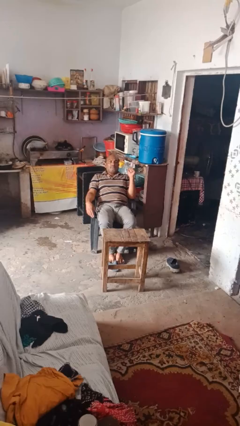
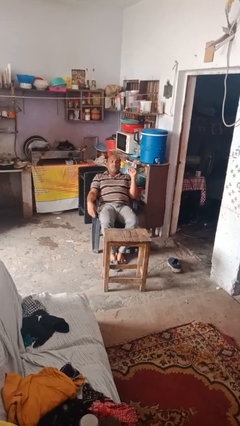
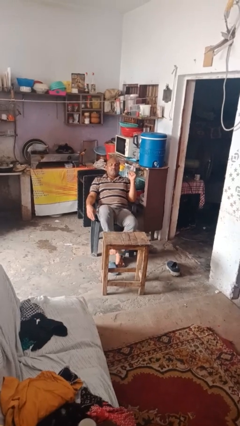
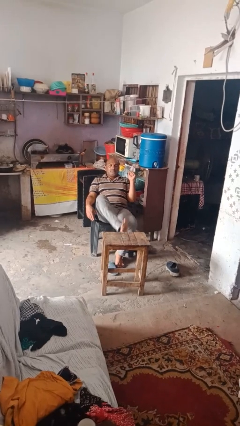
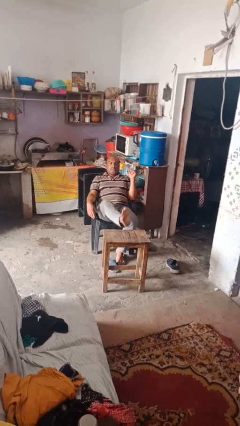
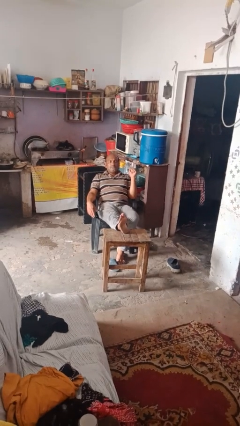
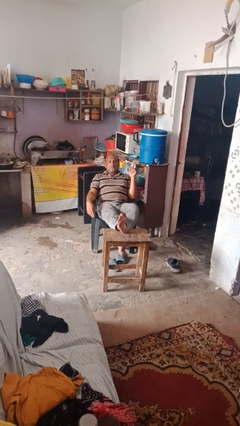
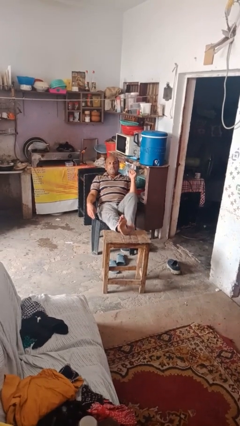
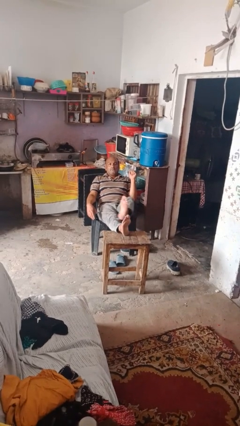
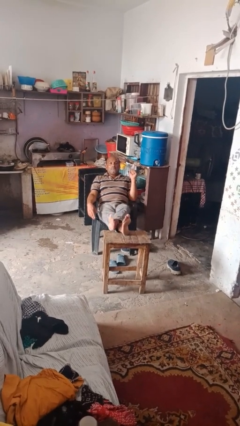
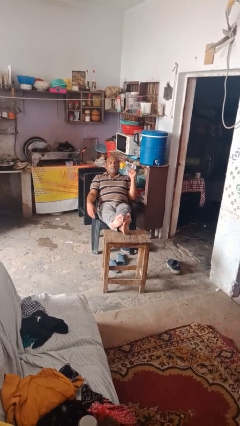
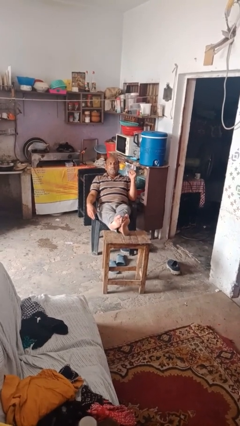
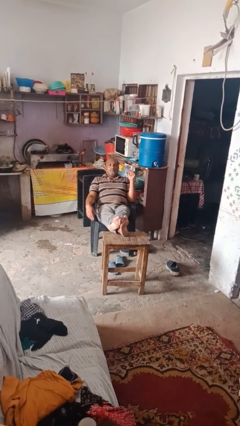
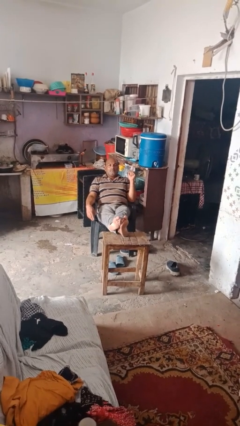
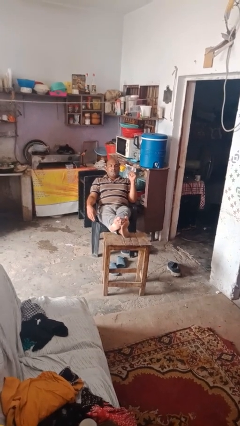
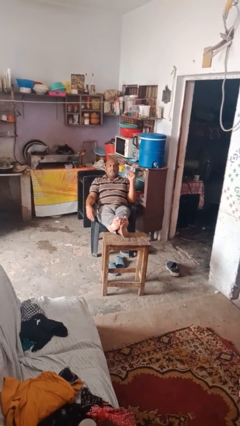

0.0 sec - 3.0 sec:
person puts feet up

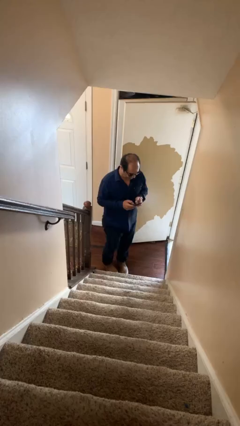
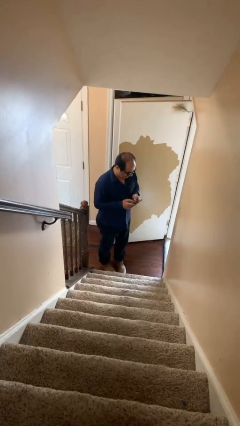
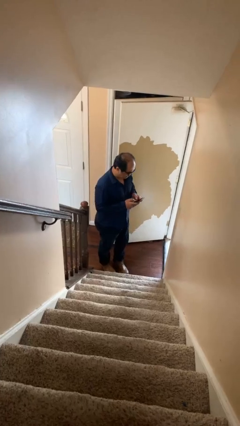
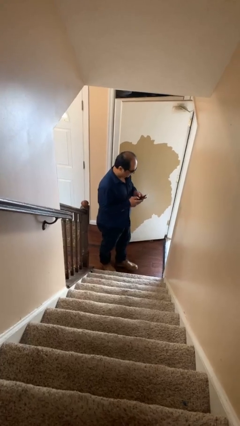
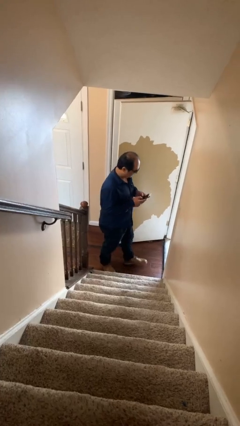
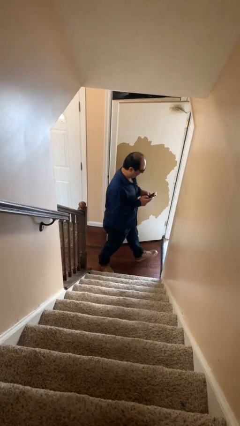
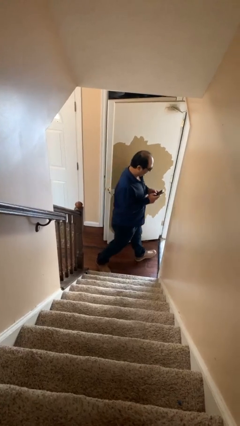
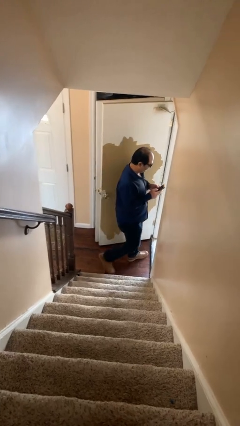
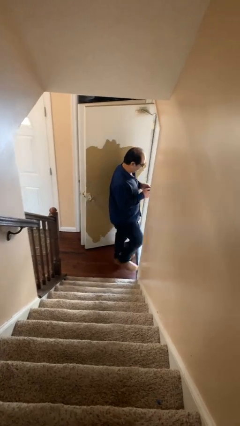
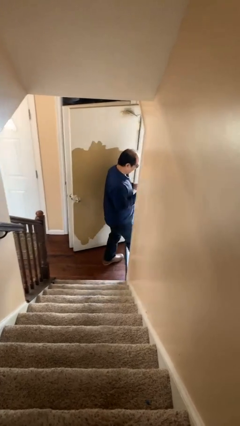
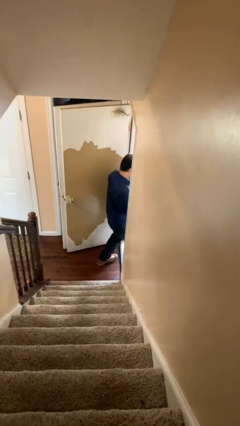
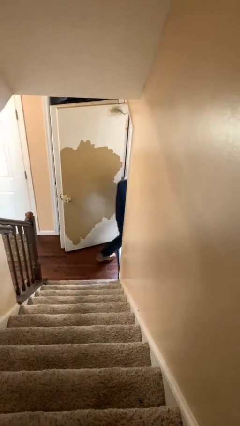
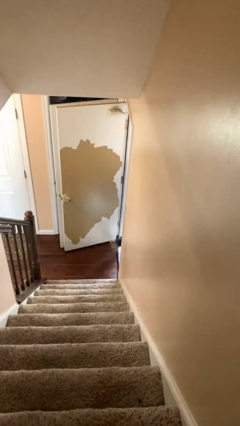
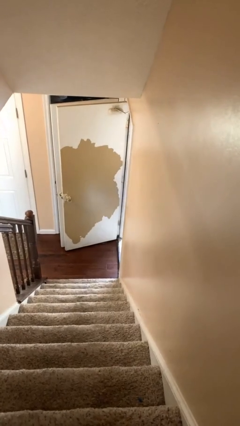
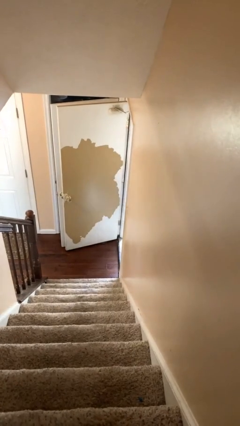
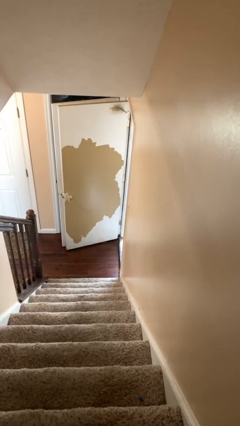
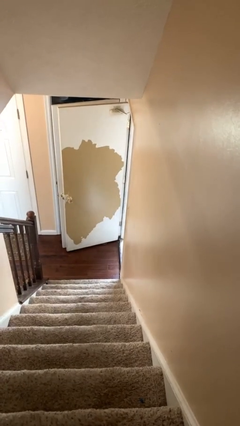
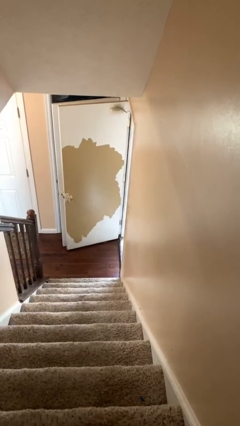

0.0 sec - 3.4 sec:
person exits scene through structure

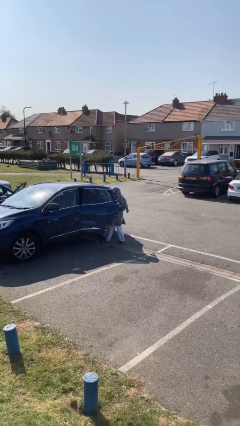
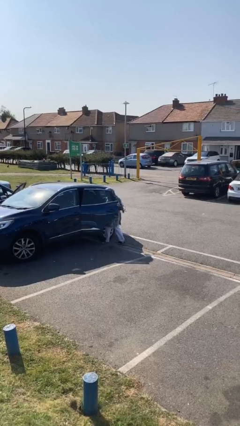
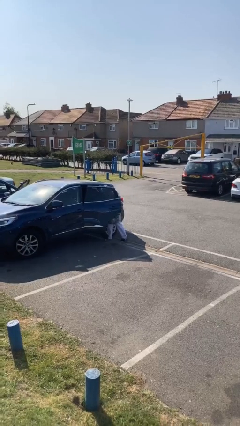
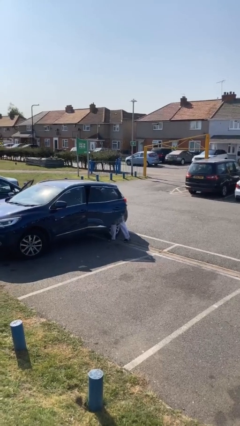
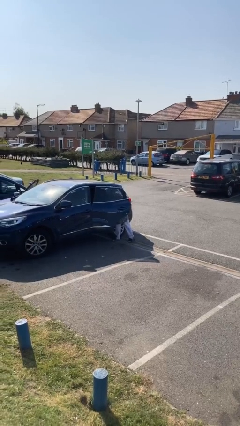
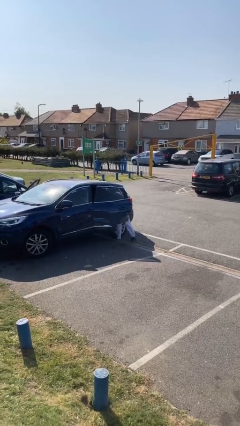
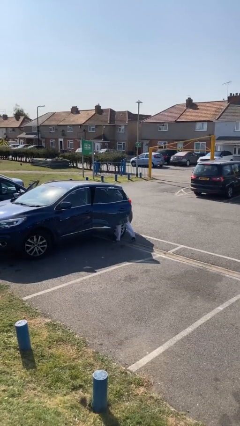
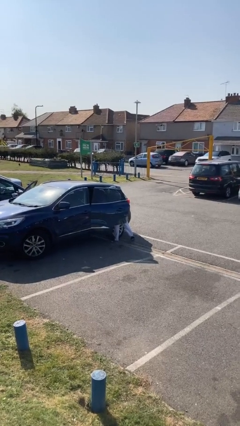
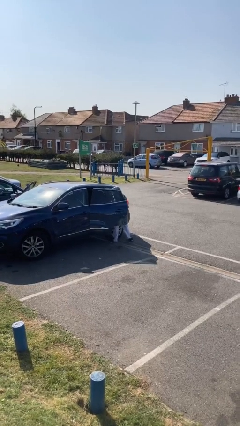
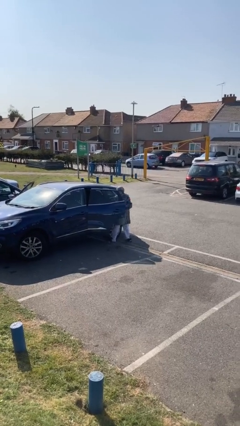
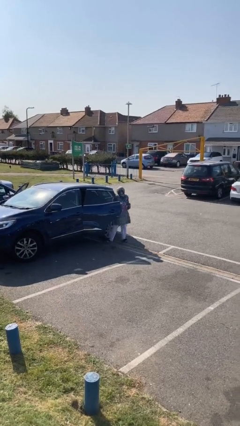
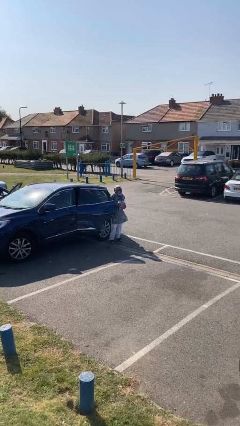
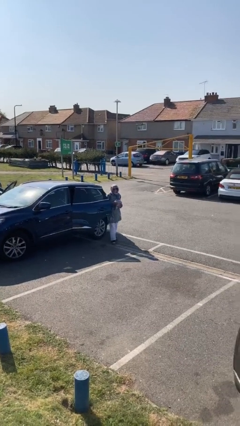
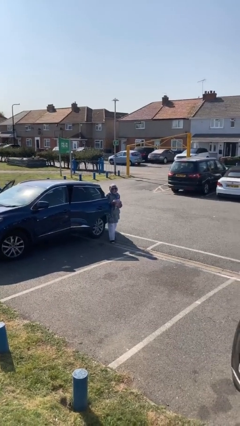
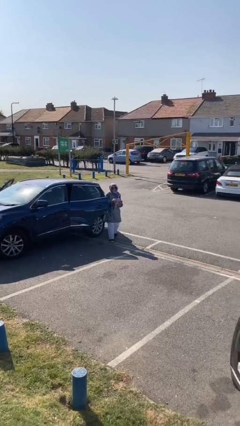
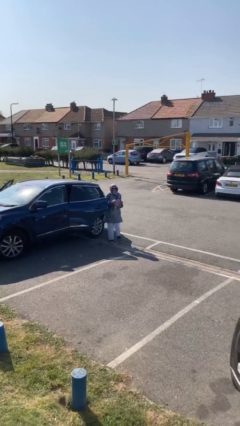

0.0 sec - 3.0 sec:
person unloads car

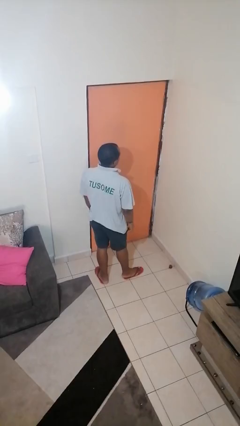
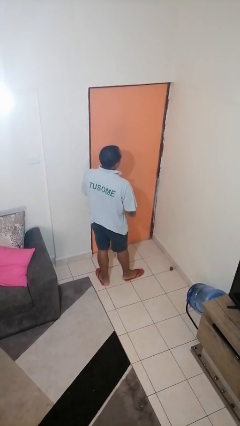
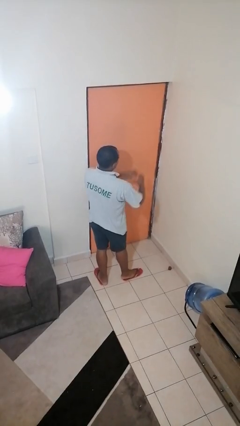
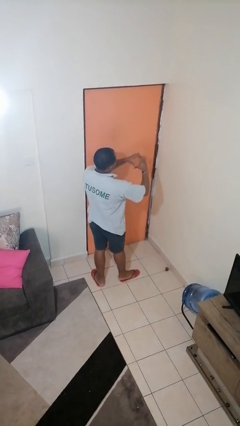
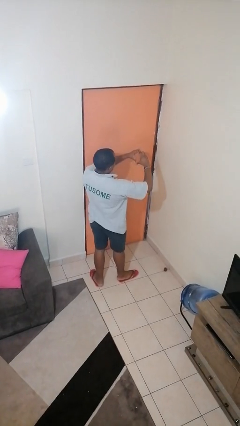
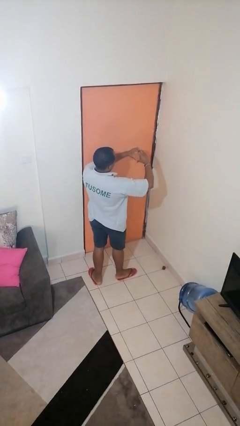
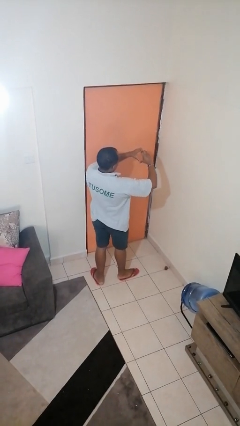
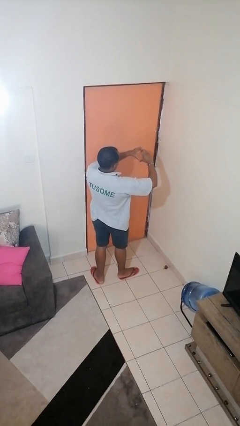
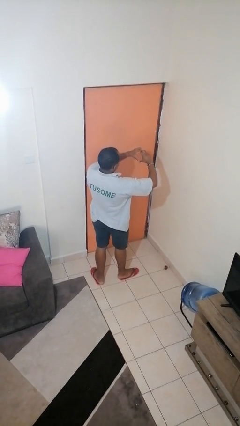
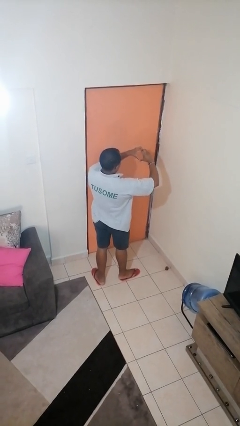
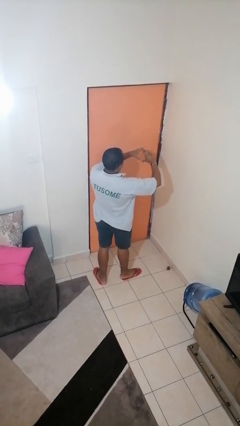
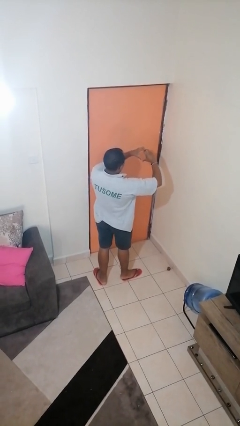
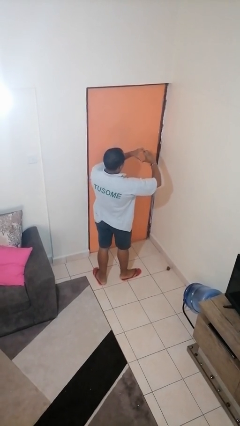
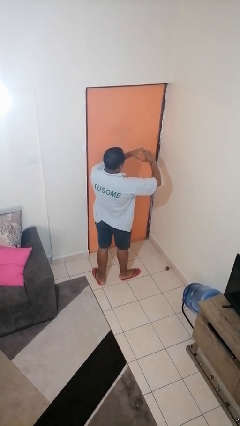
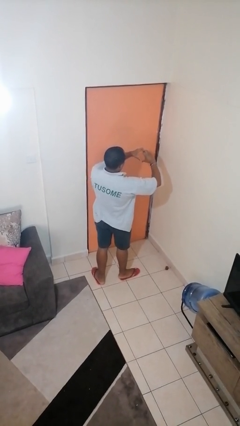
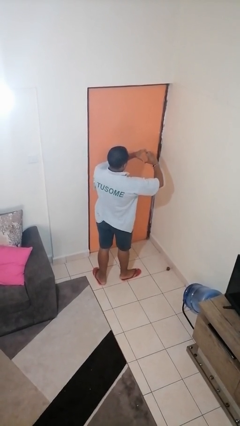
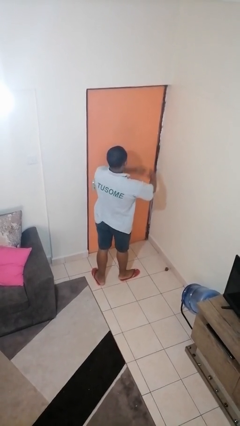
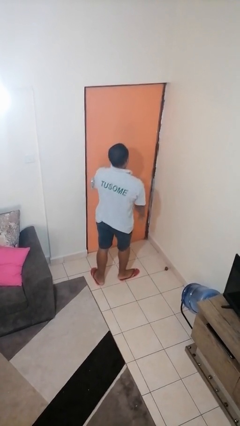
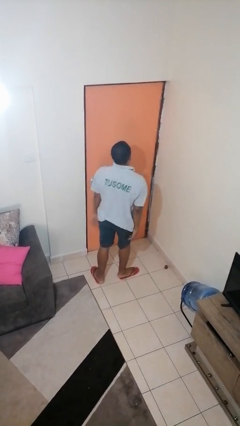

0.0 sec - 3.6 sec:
person gestures heart

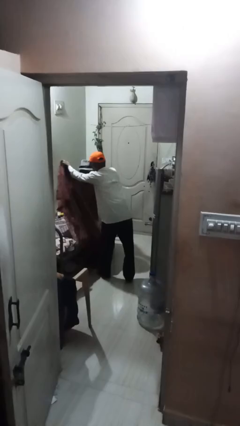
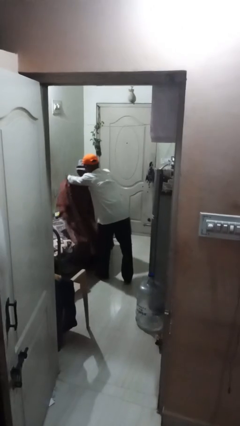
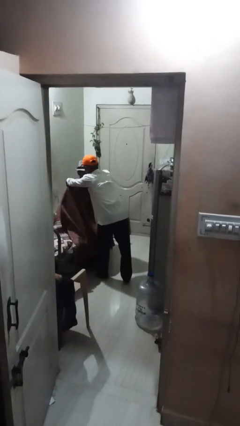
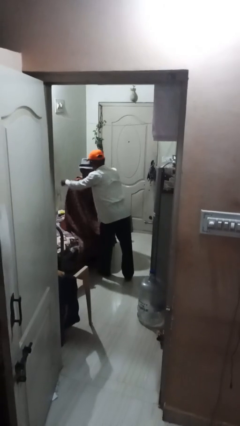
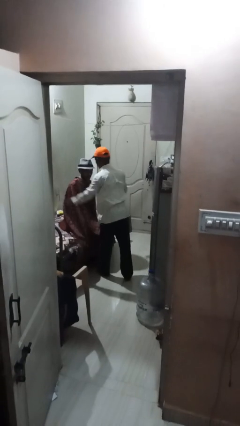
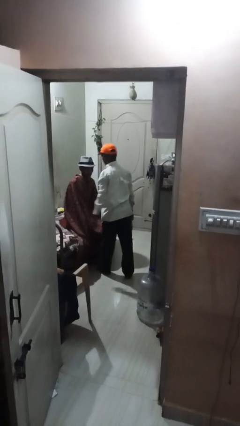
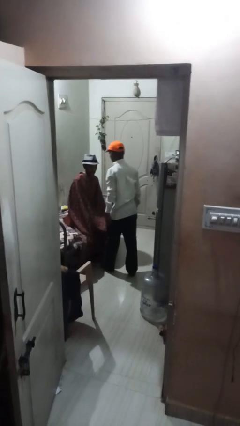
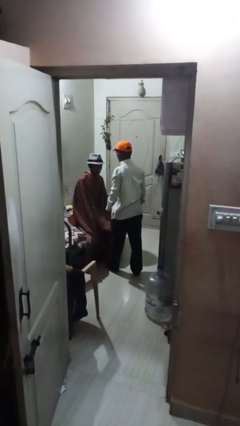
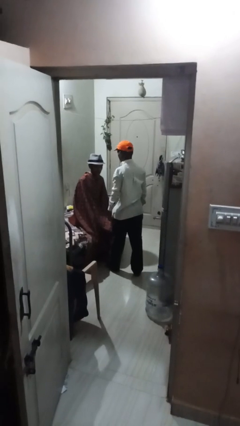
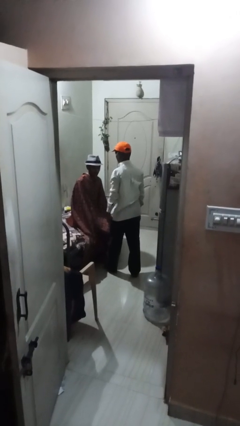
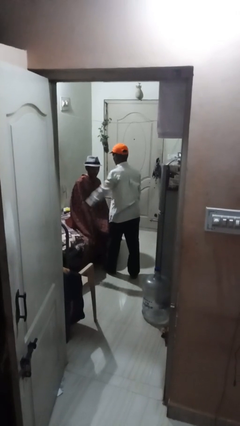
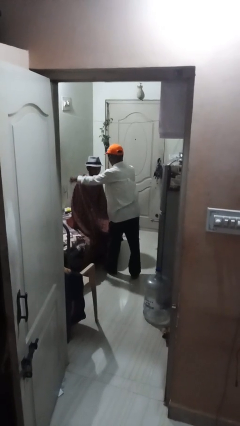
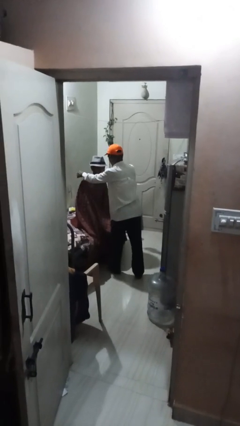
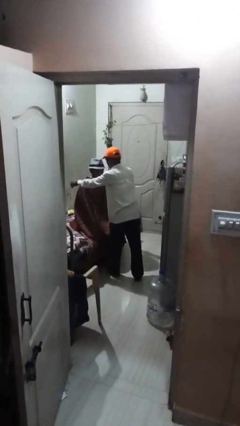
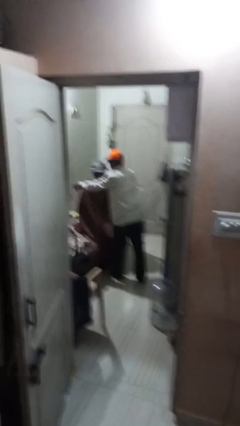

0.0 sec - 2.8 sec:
person covers friend with blanket

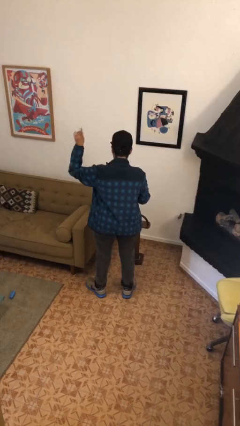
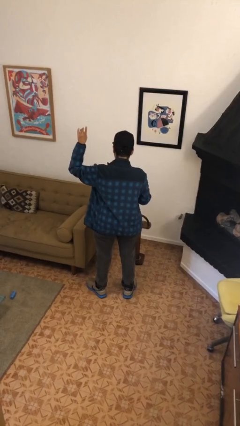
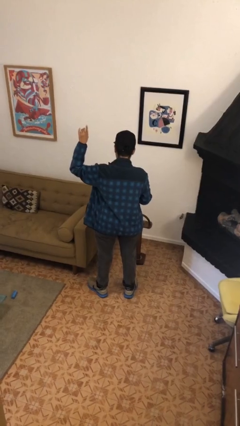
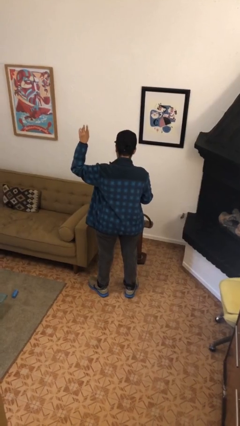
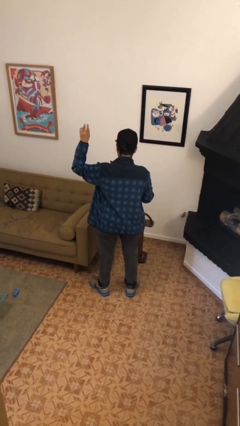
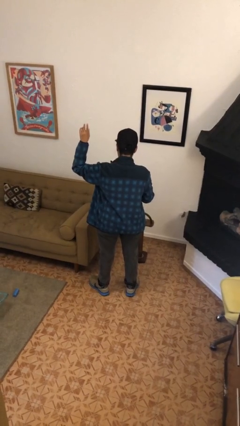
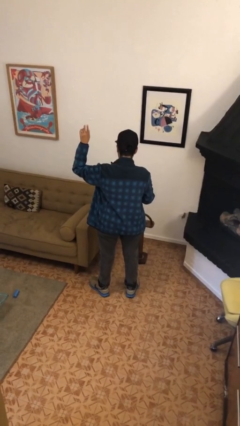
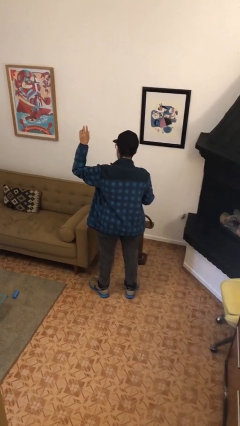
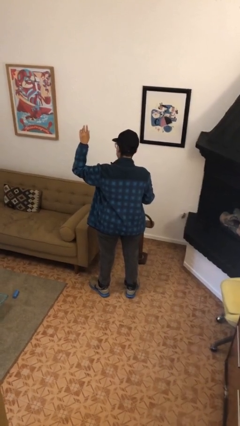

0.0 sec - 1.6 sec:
person gestures raise hand
